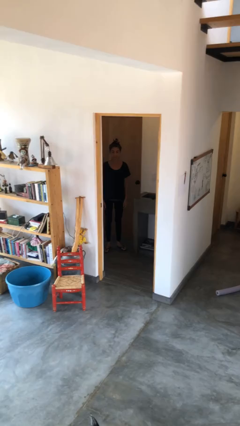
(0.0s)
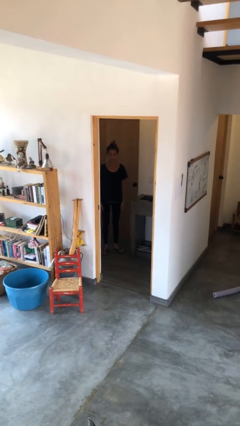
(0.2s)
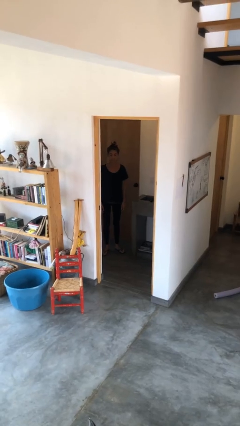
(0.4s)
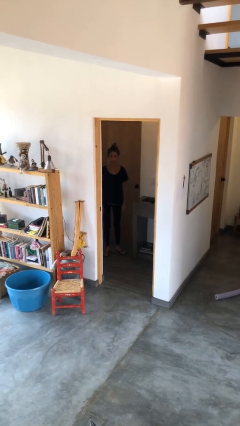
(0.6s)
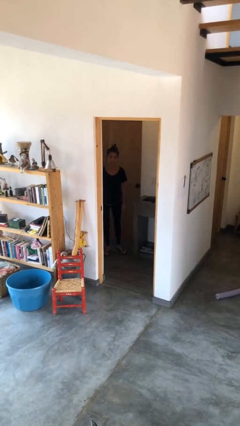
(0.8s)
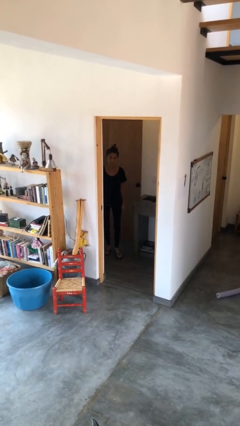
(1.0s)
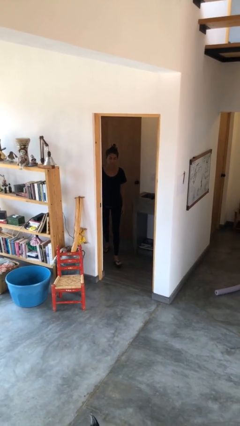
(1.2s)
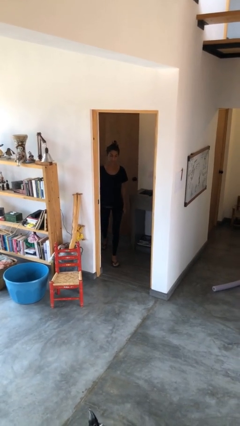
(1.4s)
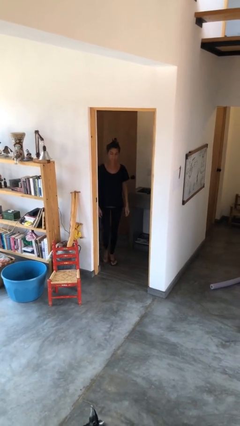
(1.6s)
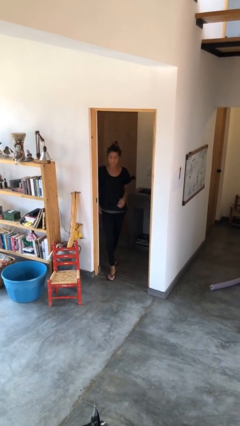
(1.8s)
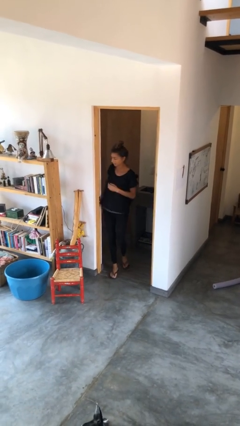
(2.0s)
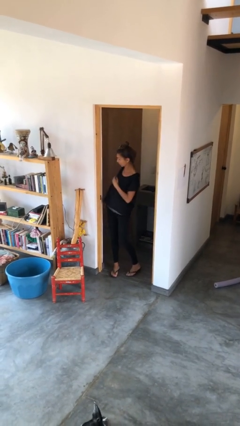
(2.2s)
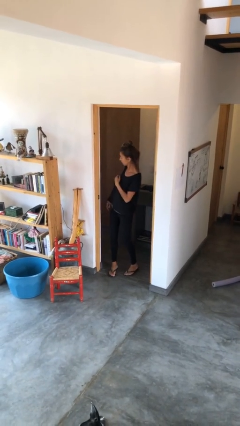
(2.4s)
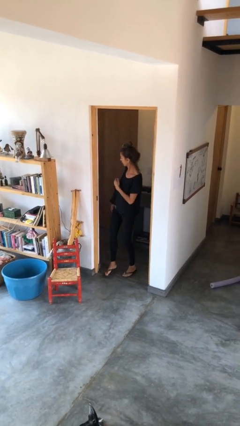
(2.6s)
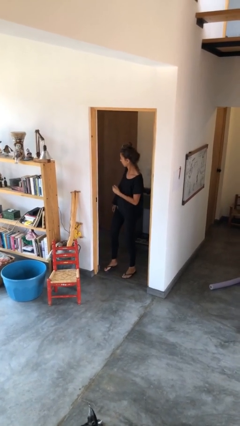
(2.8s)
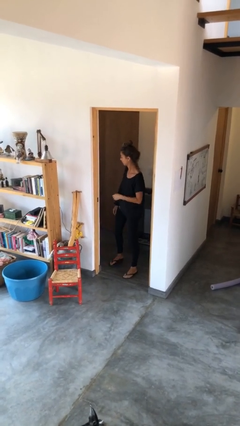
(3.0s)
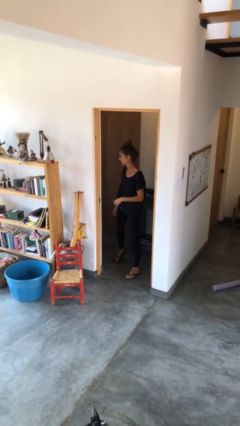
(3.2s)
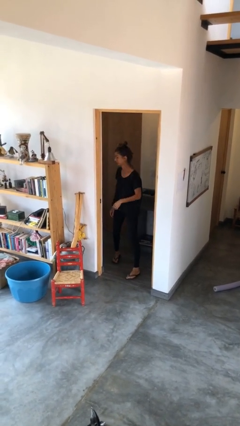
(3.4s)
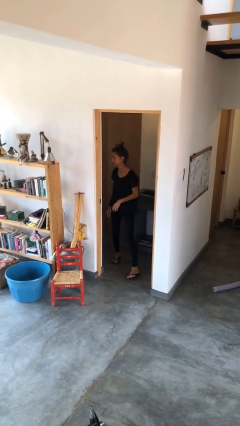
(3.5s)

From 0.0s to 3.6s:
person bumps into wall

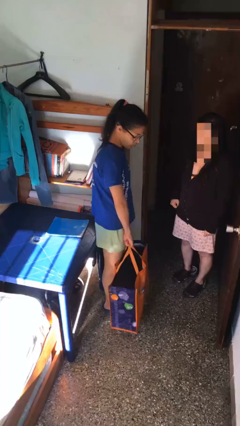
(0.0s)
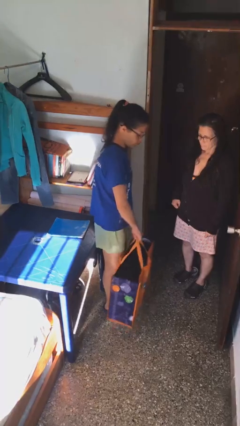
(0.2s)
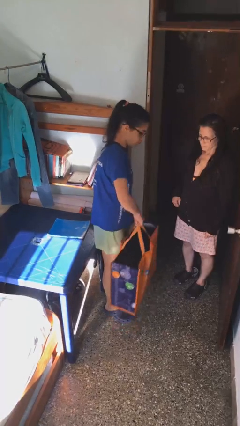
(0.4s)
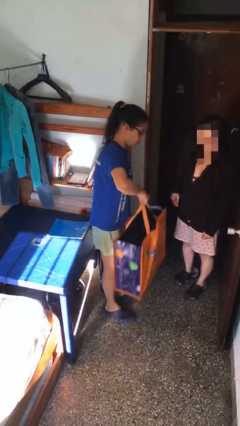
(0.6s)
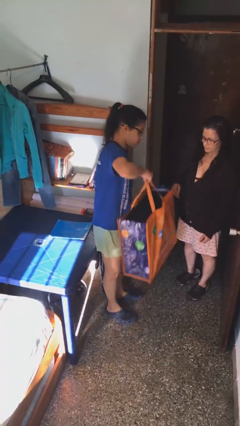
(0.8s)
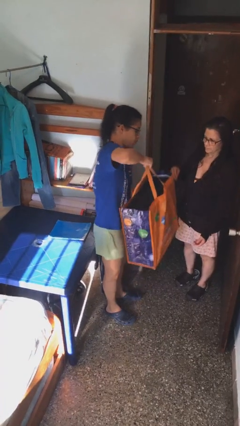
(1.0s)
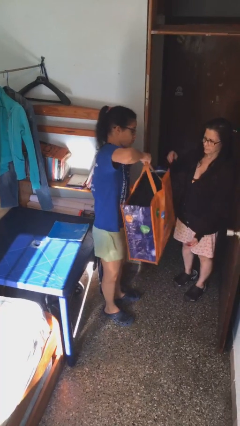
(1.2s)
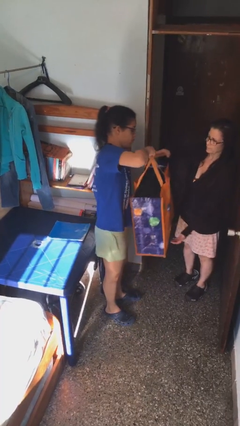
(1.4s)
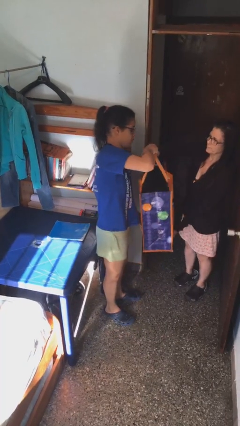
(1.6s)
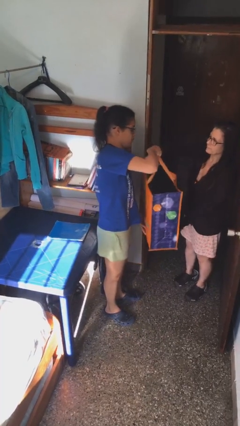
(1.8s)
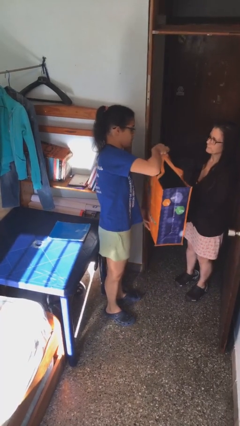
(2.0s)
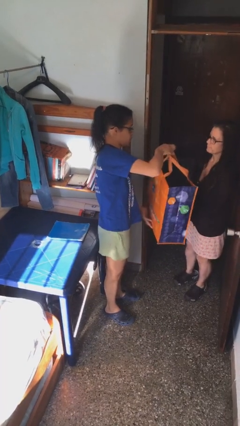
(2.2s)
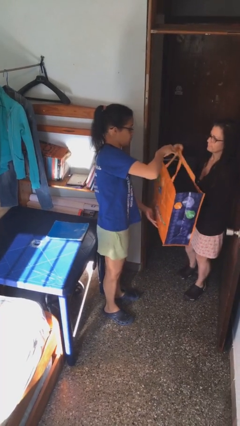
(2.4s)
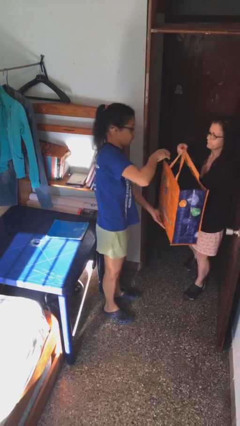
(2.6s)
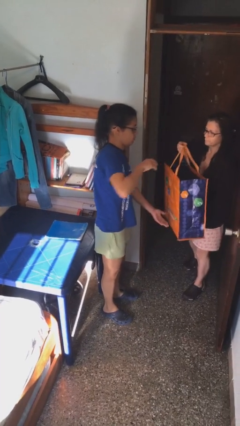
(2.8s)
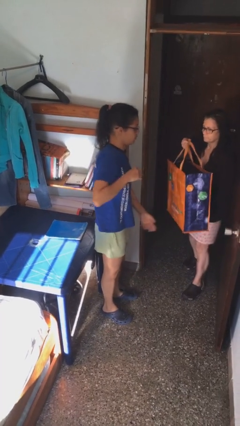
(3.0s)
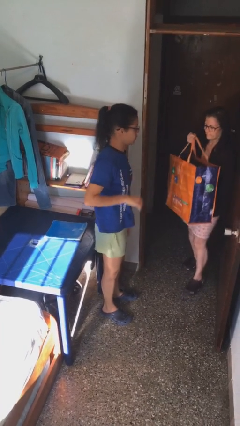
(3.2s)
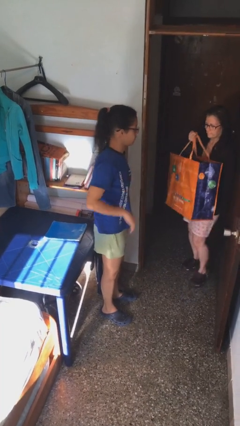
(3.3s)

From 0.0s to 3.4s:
person transfers object to person

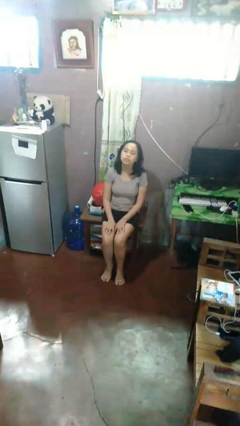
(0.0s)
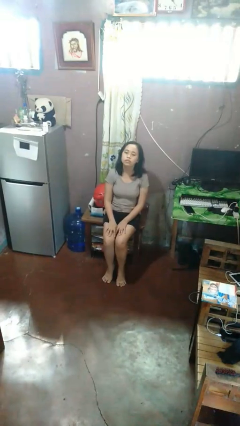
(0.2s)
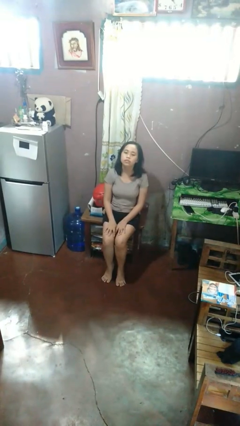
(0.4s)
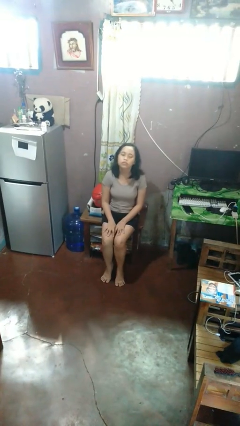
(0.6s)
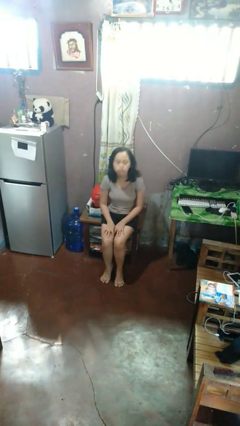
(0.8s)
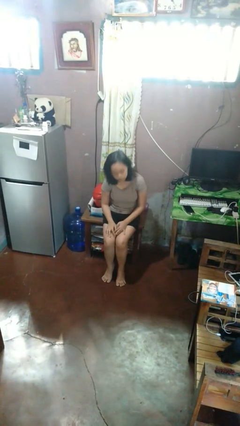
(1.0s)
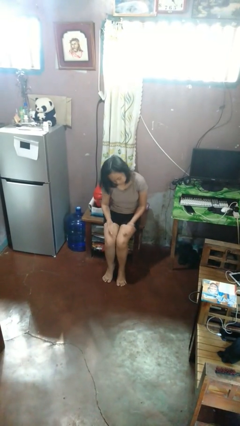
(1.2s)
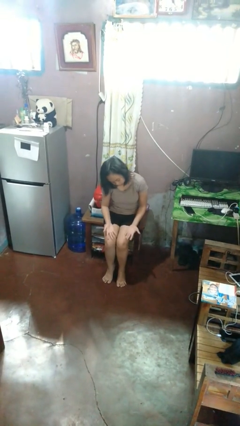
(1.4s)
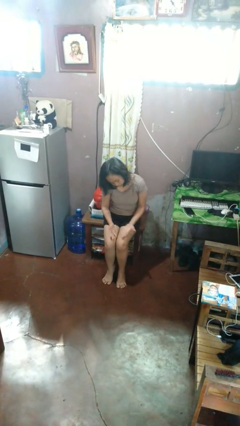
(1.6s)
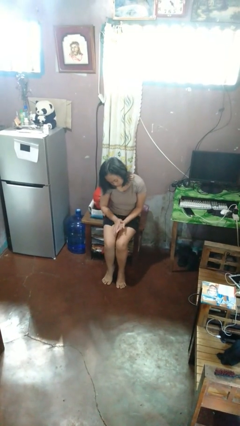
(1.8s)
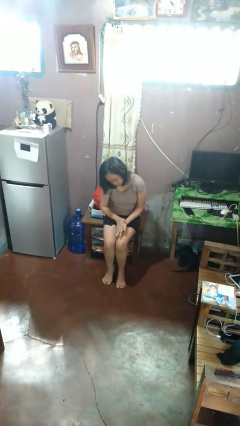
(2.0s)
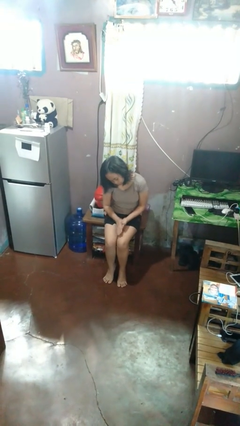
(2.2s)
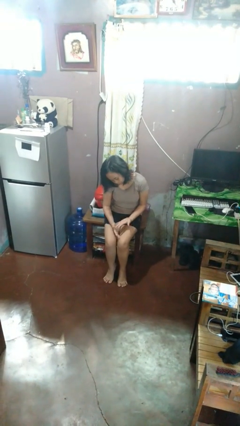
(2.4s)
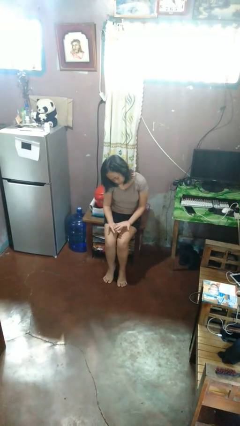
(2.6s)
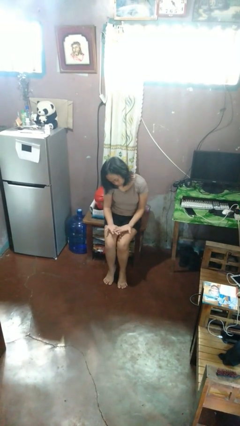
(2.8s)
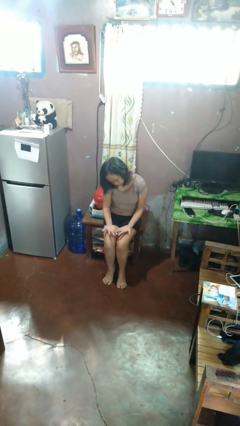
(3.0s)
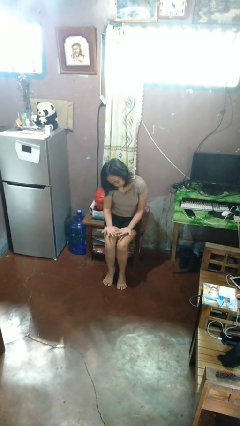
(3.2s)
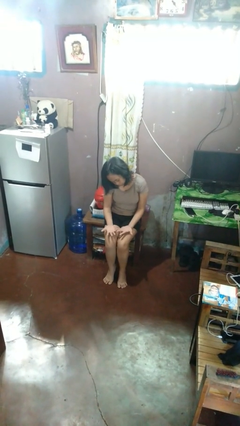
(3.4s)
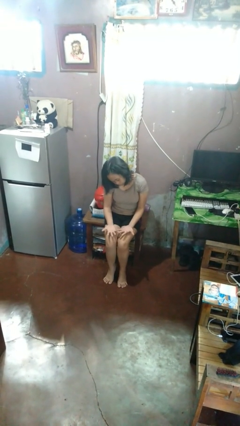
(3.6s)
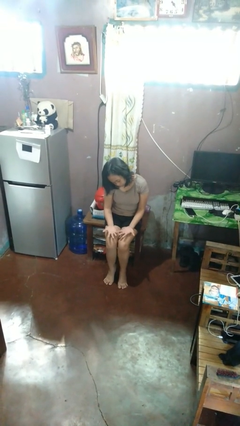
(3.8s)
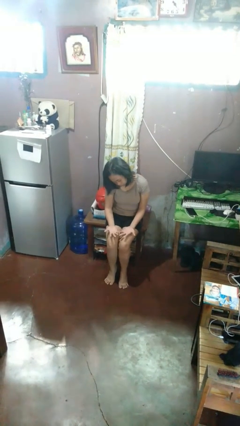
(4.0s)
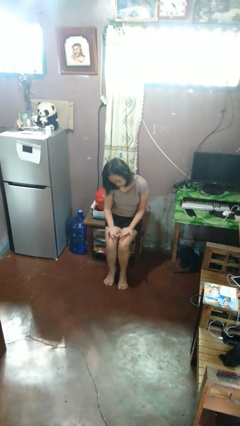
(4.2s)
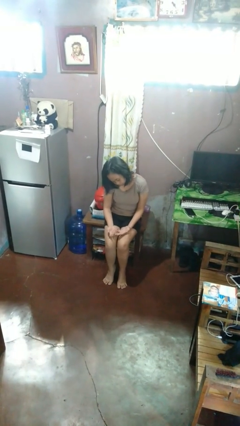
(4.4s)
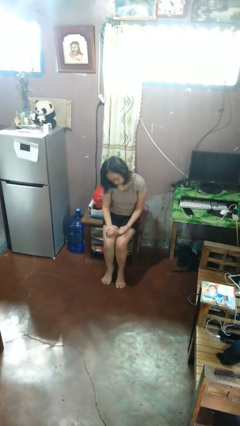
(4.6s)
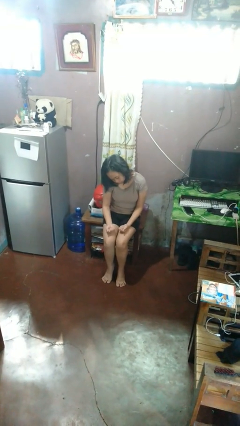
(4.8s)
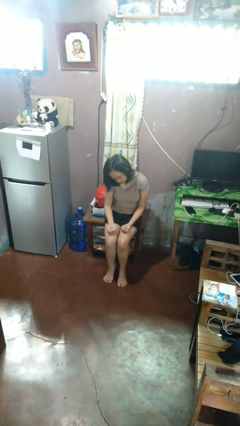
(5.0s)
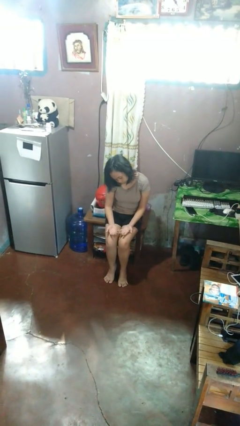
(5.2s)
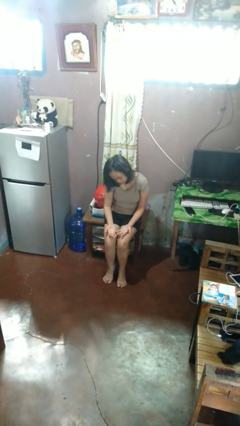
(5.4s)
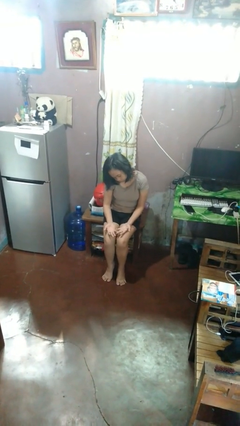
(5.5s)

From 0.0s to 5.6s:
person looks at hands in lap

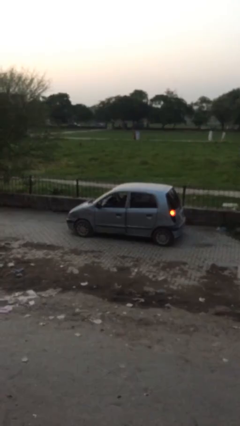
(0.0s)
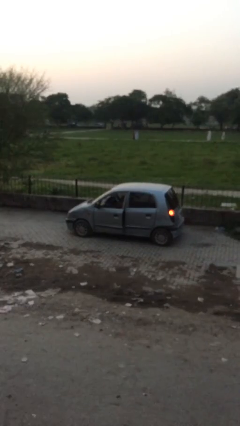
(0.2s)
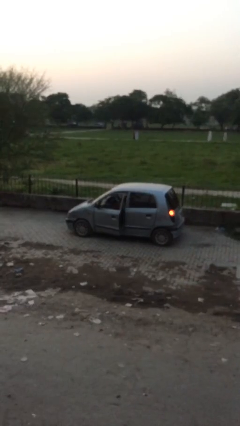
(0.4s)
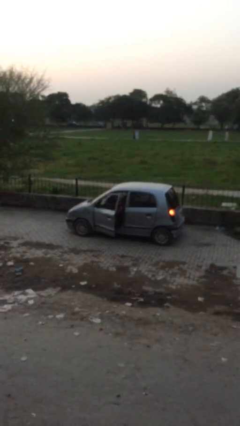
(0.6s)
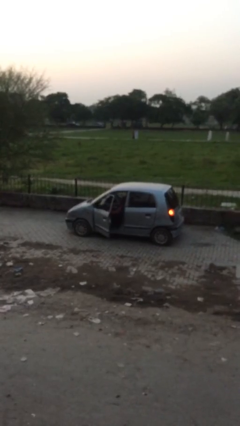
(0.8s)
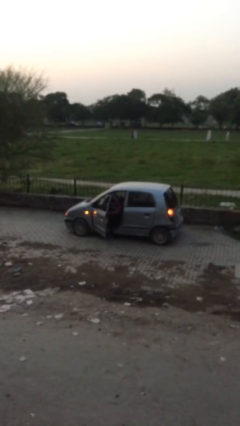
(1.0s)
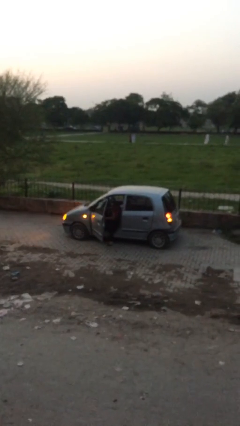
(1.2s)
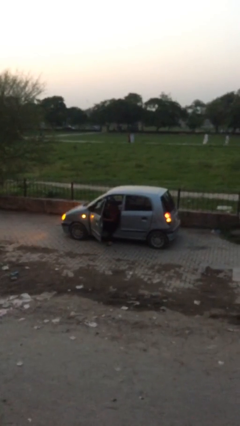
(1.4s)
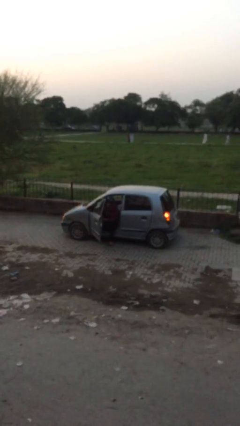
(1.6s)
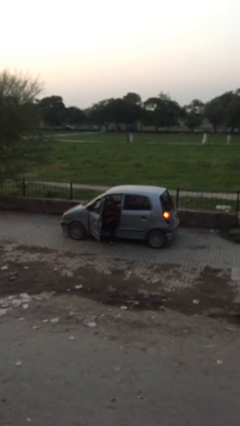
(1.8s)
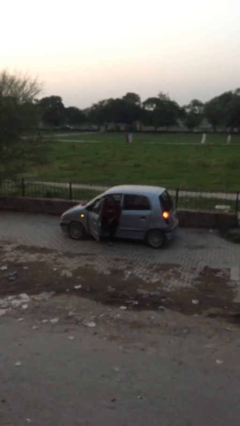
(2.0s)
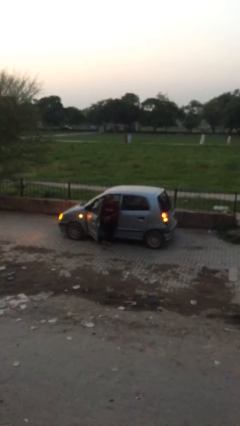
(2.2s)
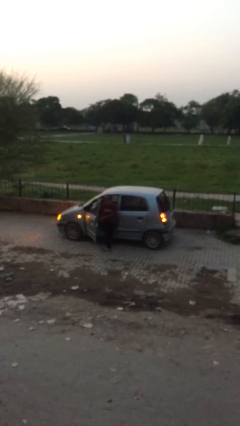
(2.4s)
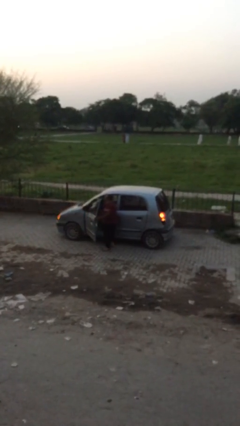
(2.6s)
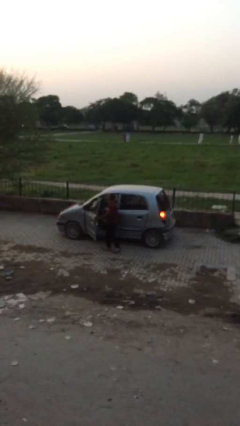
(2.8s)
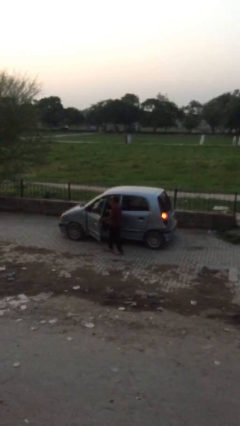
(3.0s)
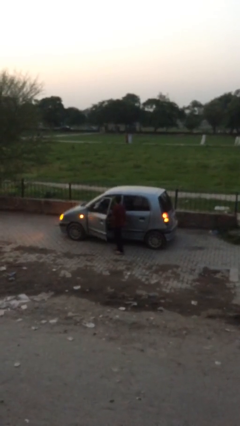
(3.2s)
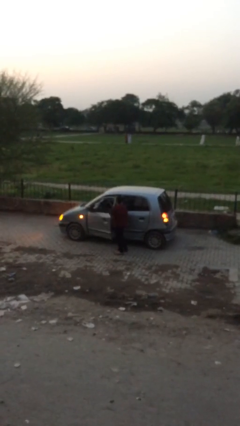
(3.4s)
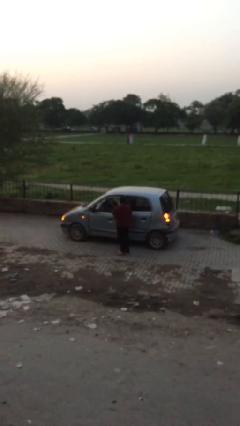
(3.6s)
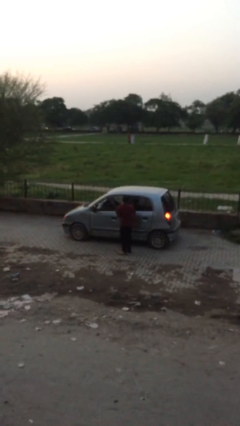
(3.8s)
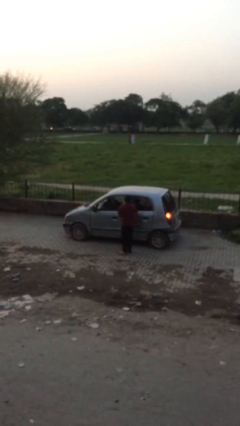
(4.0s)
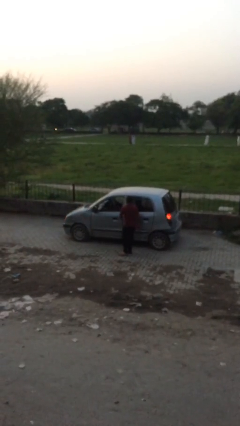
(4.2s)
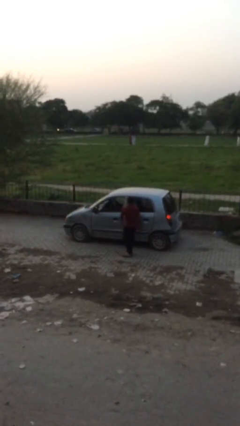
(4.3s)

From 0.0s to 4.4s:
car drops off person

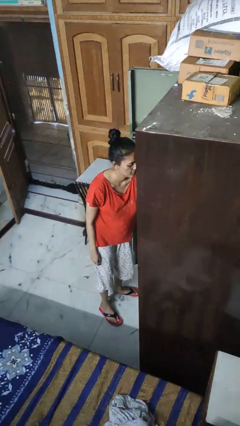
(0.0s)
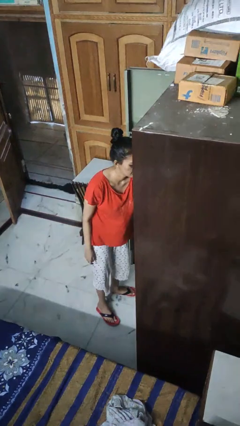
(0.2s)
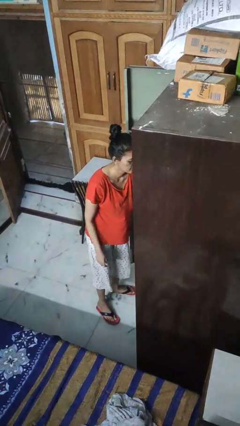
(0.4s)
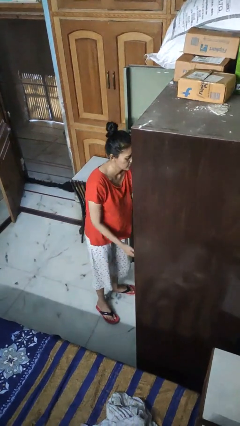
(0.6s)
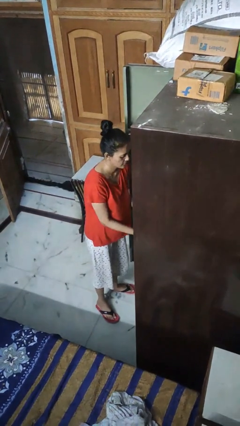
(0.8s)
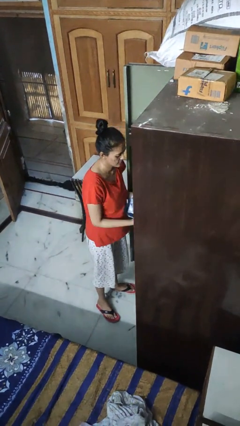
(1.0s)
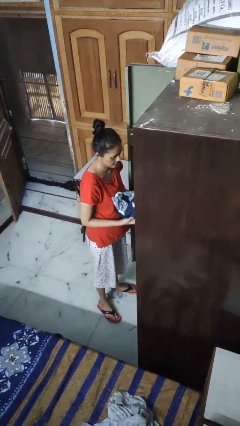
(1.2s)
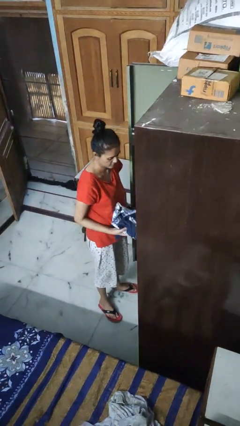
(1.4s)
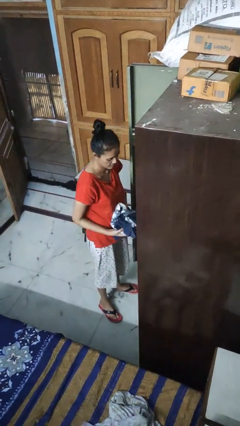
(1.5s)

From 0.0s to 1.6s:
person takes clothes from dresser
